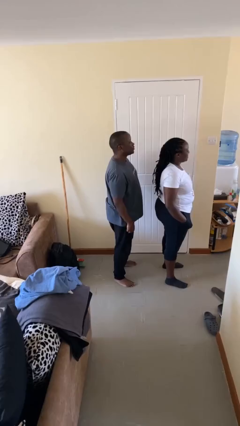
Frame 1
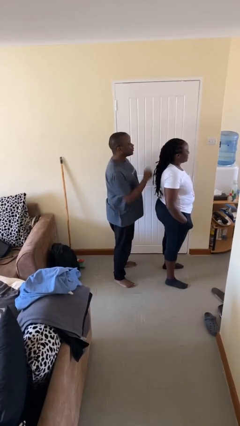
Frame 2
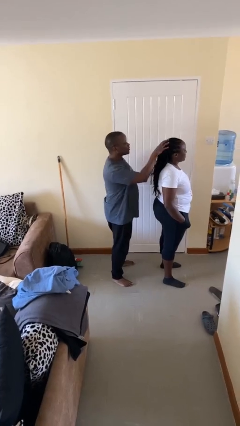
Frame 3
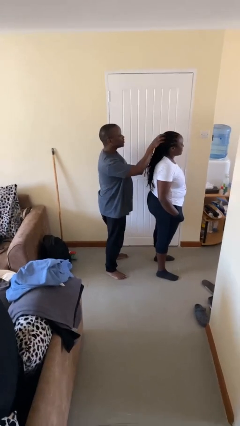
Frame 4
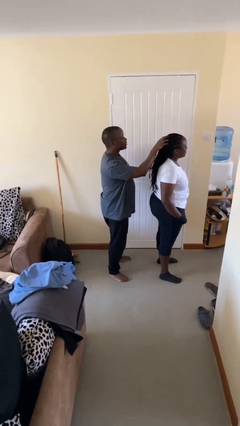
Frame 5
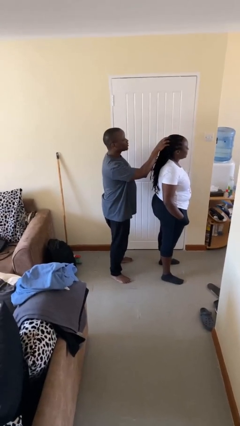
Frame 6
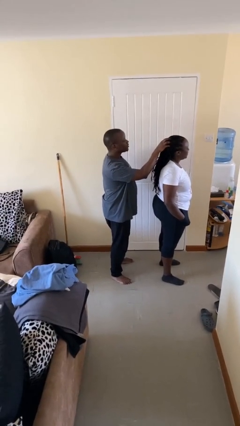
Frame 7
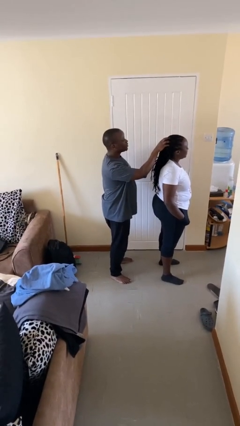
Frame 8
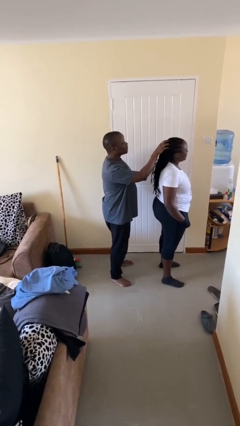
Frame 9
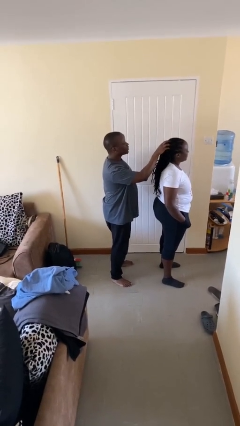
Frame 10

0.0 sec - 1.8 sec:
person grabs person by hair

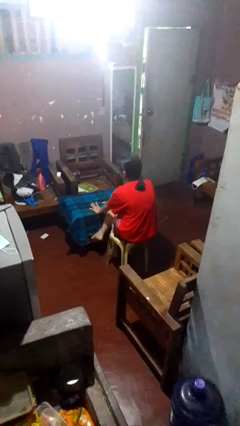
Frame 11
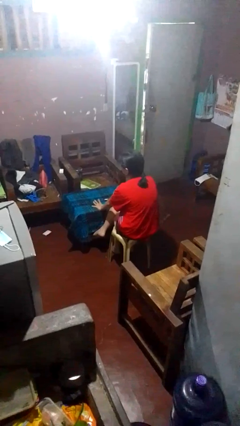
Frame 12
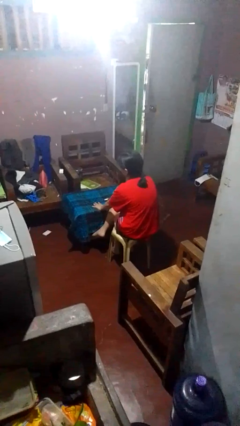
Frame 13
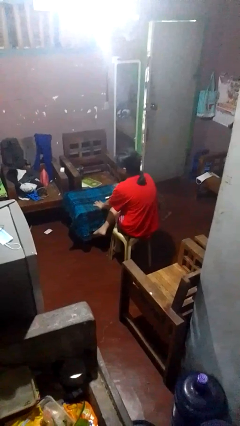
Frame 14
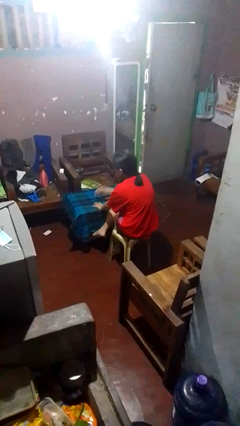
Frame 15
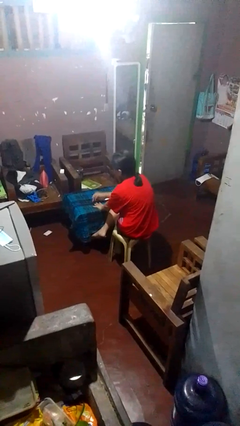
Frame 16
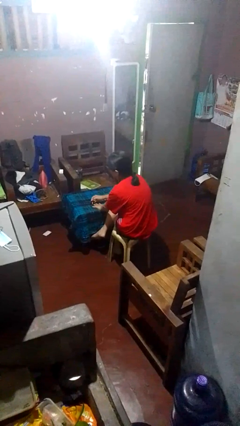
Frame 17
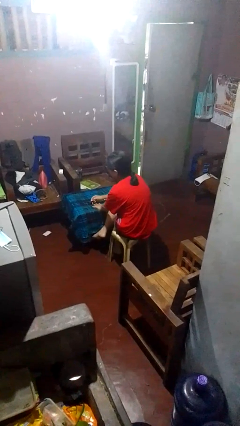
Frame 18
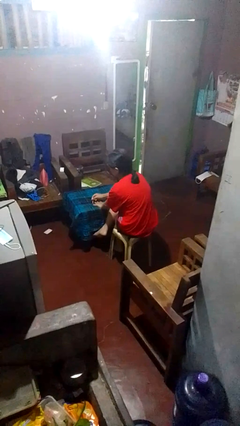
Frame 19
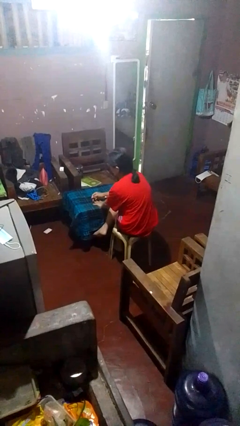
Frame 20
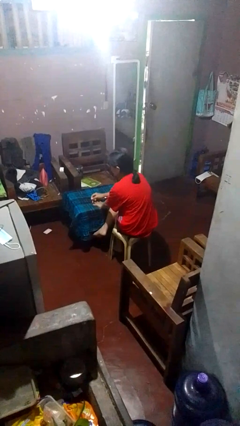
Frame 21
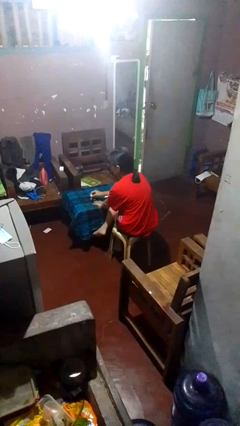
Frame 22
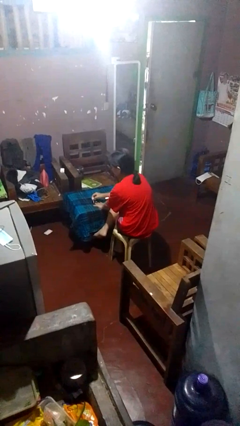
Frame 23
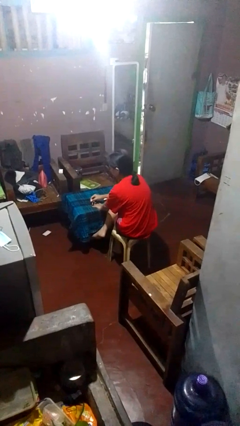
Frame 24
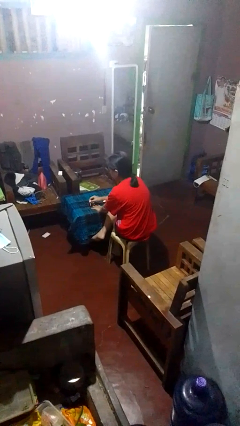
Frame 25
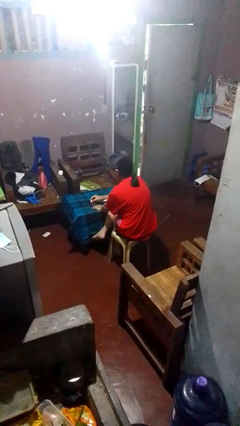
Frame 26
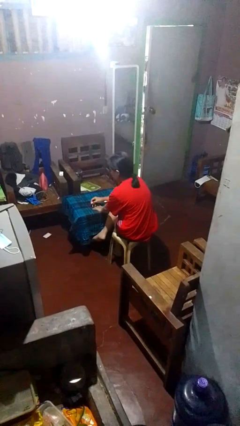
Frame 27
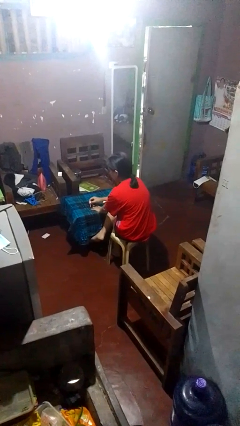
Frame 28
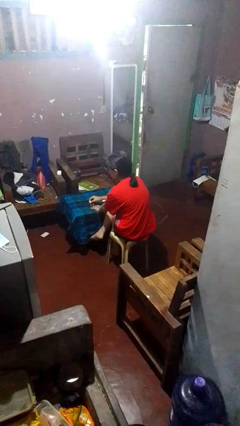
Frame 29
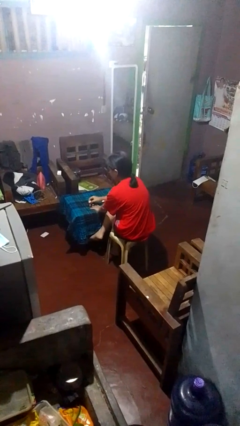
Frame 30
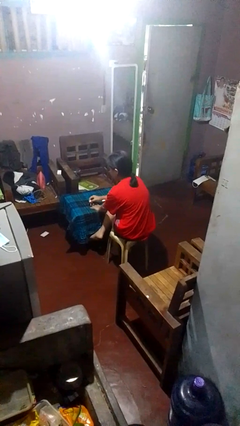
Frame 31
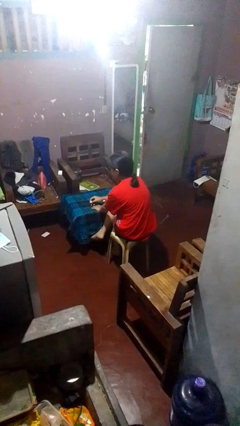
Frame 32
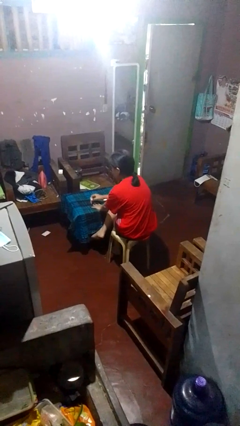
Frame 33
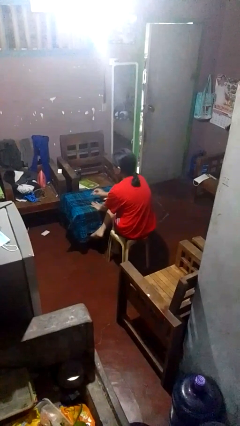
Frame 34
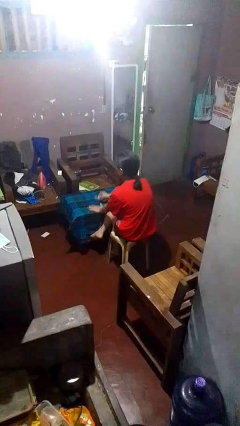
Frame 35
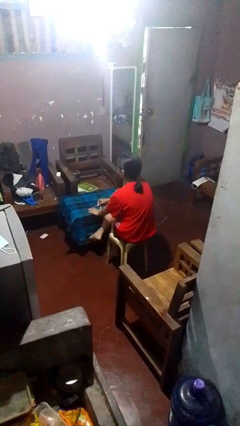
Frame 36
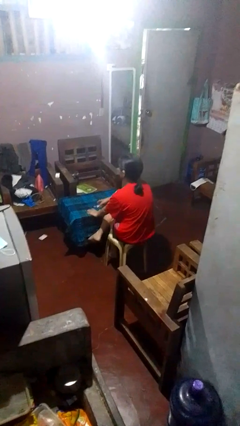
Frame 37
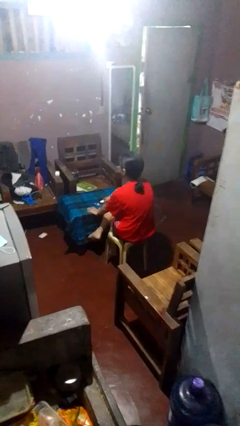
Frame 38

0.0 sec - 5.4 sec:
person paints fingernails

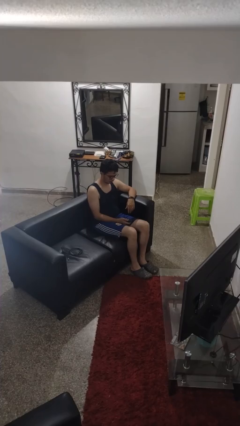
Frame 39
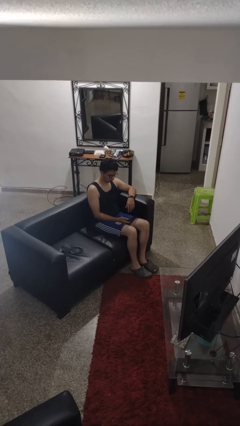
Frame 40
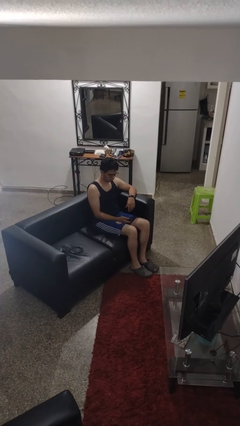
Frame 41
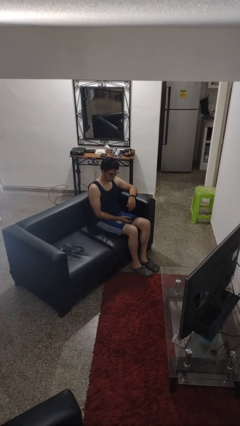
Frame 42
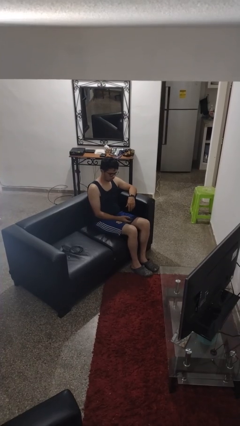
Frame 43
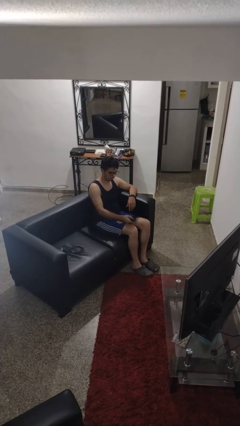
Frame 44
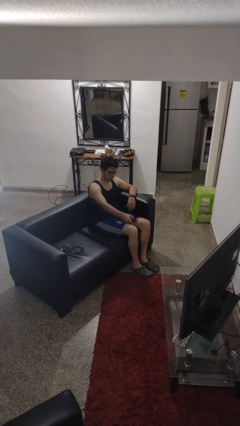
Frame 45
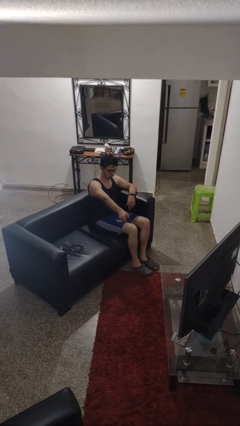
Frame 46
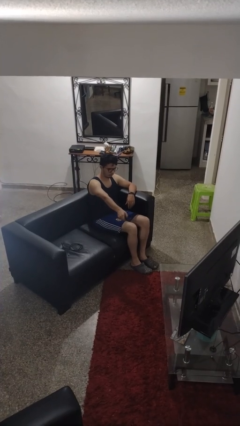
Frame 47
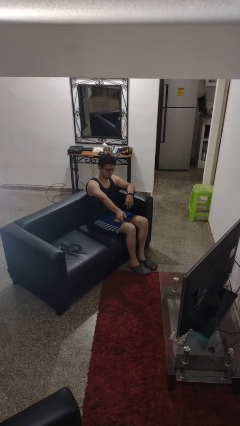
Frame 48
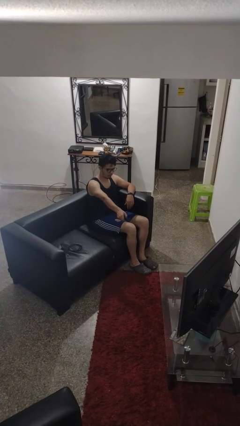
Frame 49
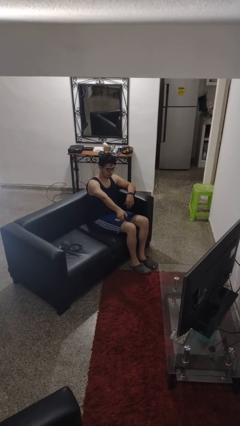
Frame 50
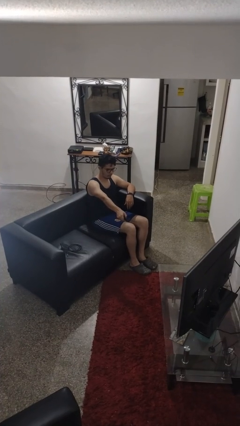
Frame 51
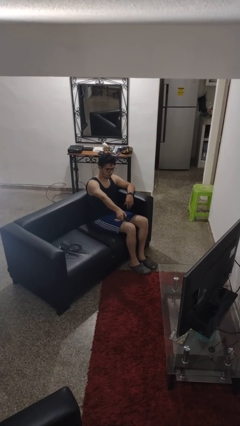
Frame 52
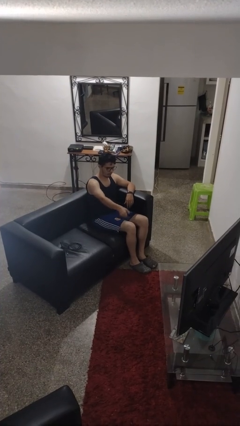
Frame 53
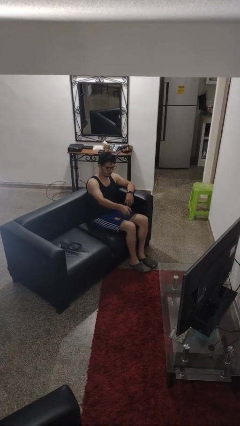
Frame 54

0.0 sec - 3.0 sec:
person uses television remote

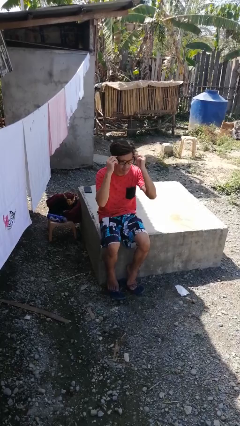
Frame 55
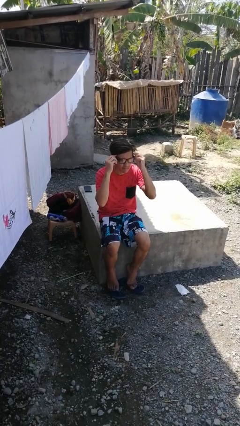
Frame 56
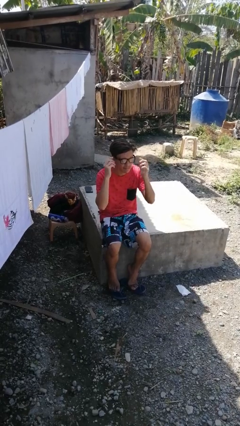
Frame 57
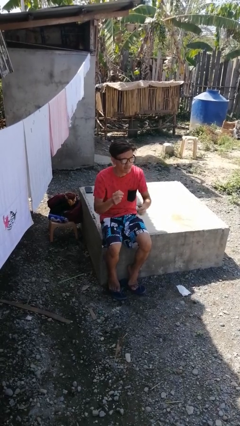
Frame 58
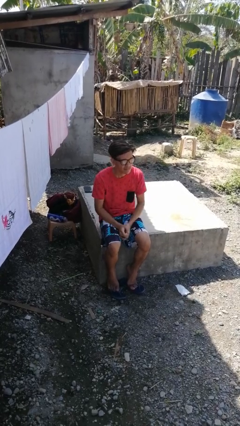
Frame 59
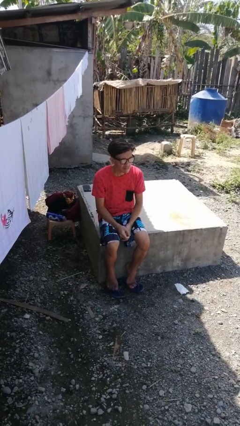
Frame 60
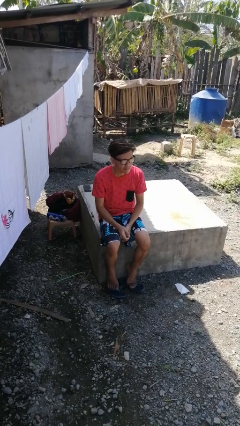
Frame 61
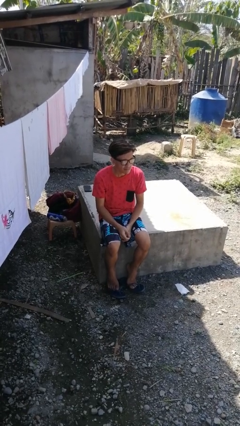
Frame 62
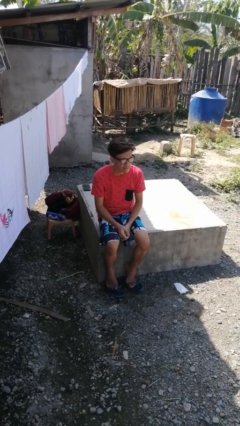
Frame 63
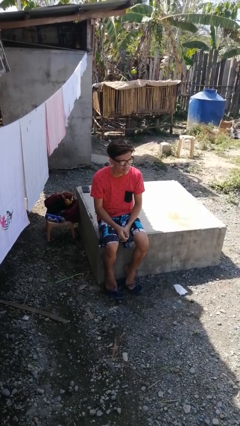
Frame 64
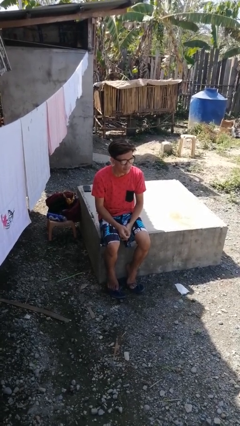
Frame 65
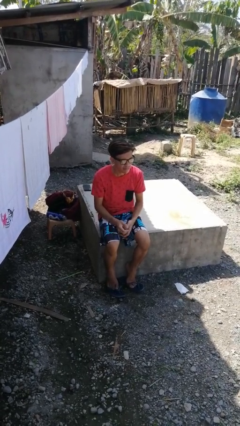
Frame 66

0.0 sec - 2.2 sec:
person puts on glasses

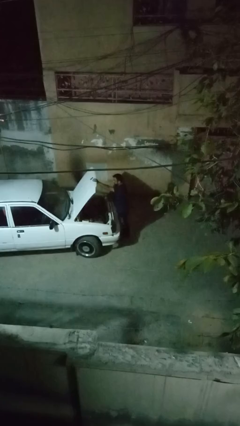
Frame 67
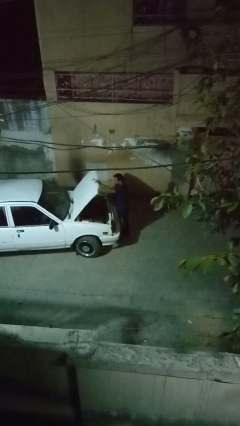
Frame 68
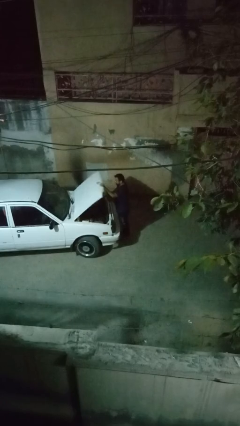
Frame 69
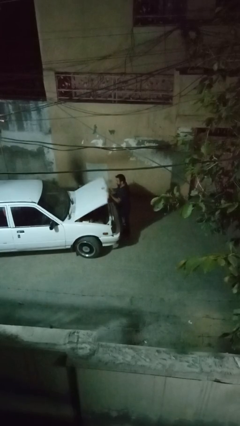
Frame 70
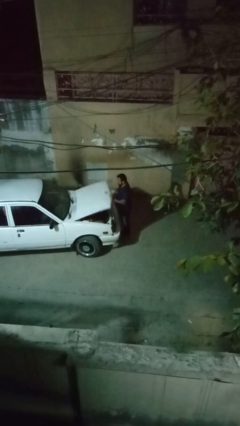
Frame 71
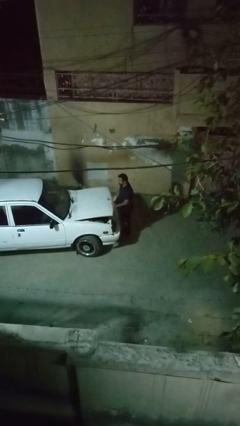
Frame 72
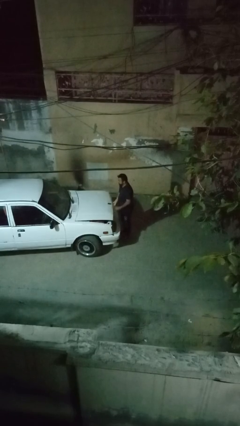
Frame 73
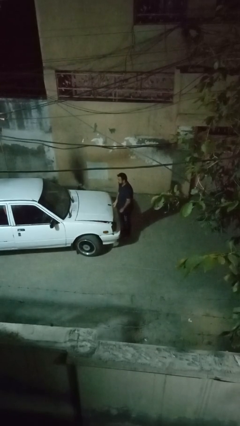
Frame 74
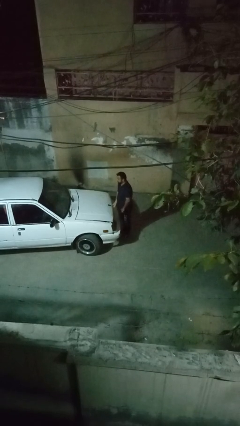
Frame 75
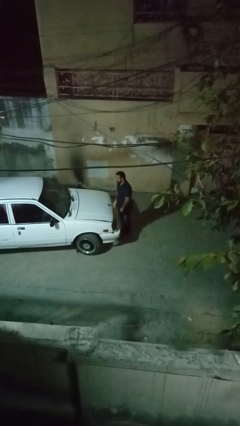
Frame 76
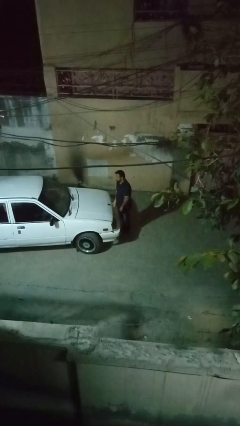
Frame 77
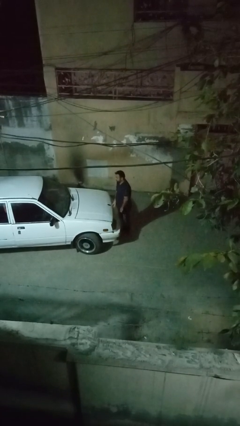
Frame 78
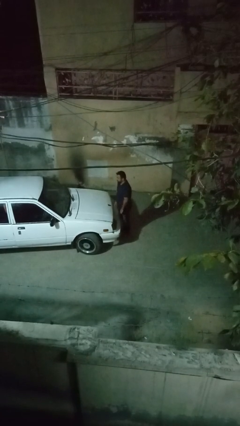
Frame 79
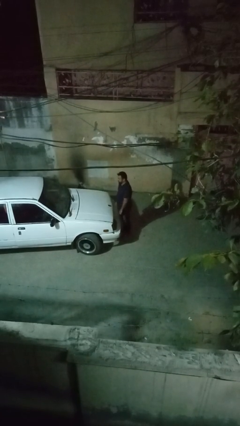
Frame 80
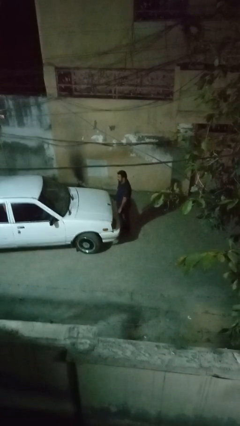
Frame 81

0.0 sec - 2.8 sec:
person closes car hood

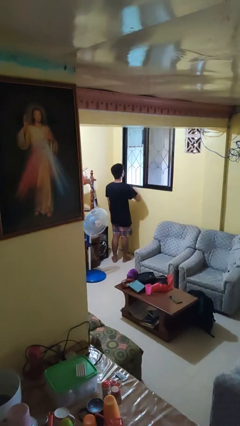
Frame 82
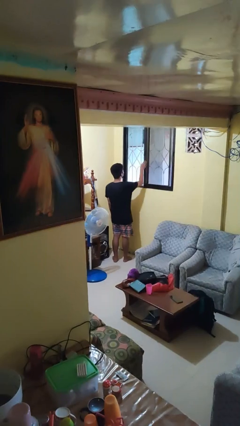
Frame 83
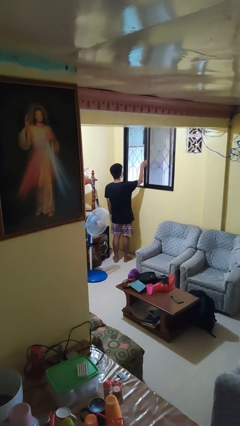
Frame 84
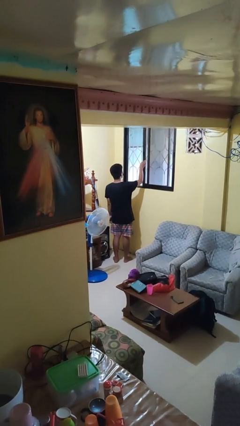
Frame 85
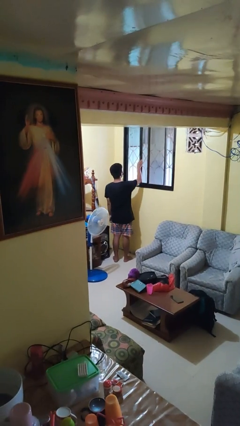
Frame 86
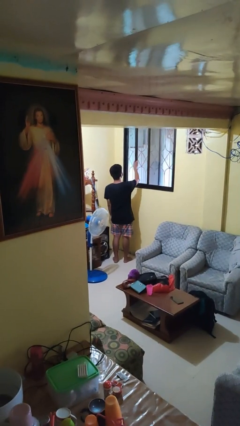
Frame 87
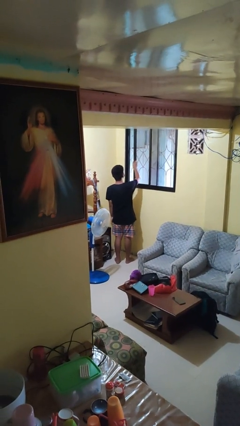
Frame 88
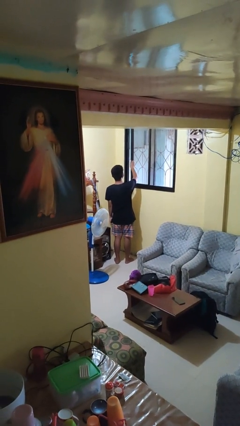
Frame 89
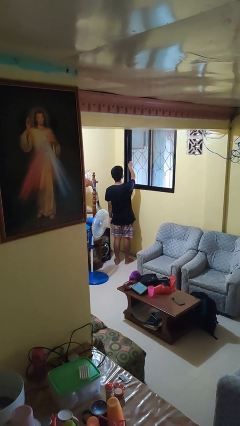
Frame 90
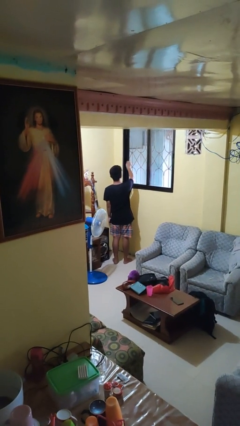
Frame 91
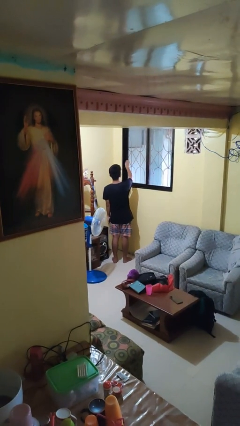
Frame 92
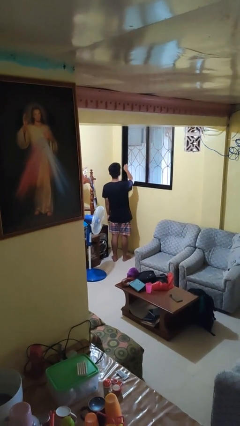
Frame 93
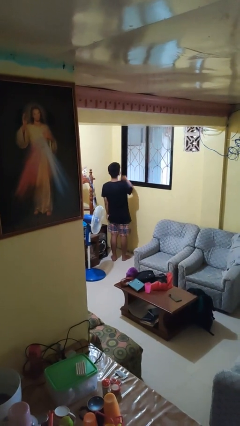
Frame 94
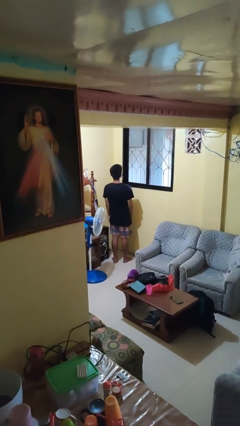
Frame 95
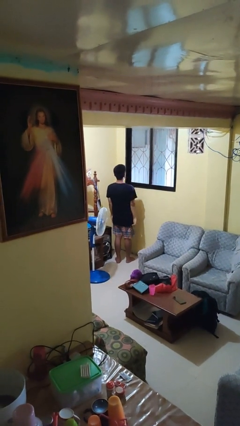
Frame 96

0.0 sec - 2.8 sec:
person closes home window
